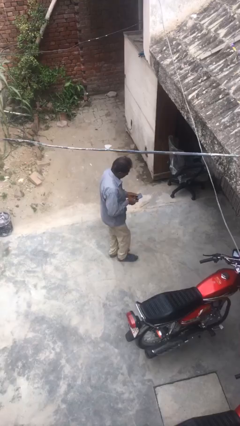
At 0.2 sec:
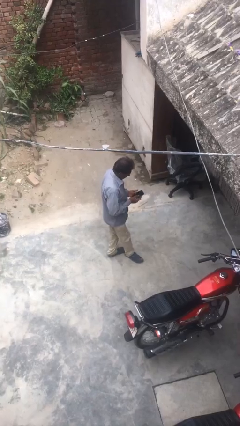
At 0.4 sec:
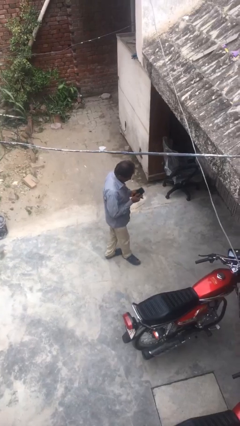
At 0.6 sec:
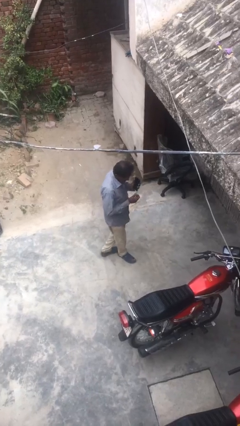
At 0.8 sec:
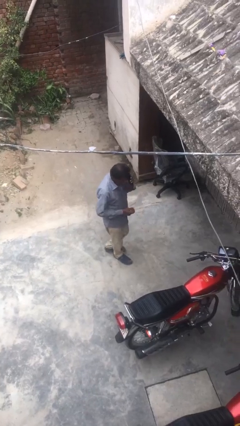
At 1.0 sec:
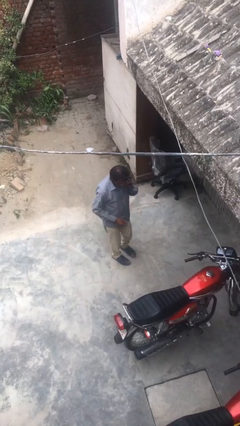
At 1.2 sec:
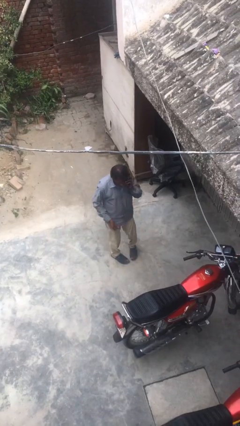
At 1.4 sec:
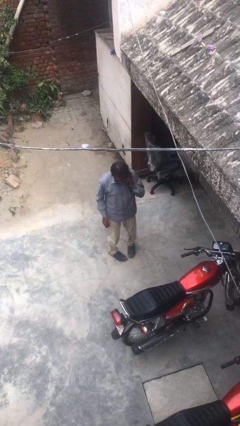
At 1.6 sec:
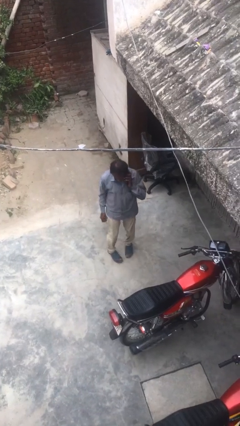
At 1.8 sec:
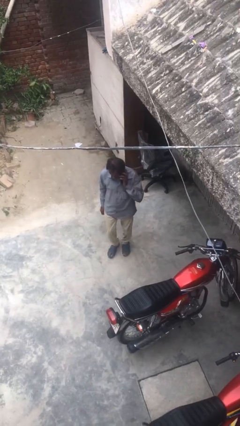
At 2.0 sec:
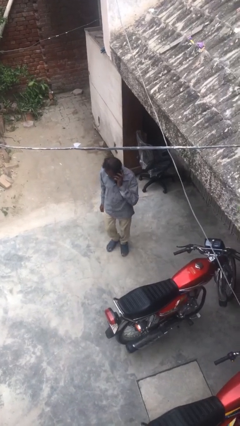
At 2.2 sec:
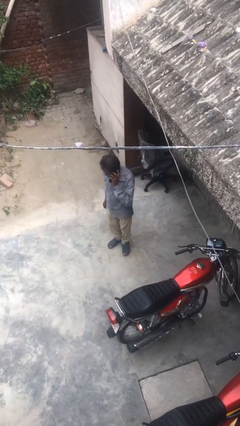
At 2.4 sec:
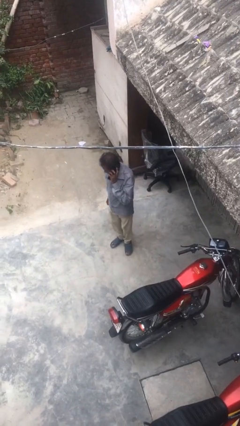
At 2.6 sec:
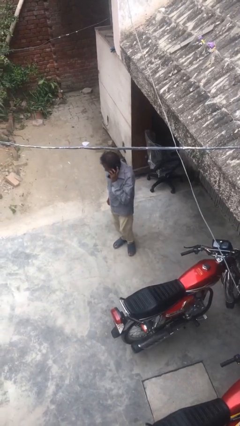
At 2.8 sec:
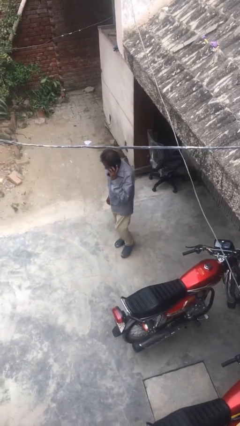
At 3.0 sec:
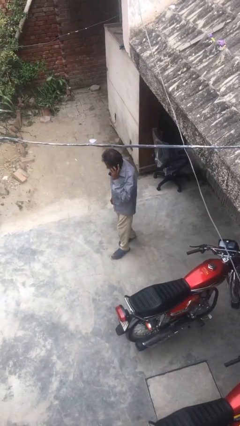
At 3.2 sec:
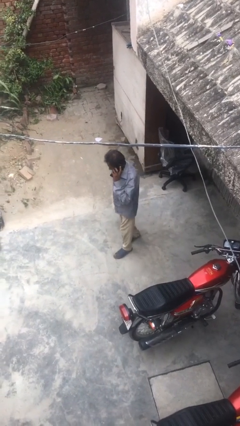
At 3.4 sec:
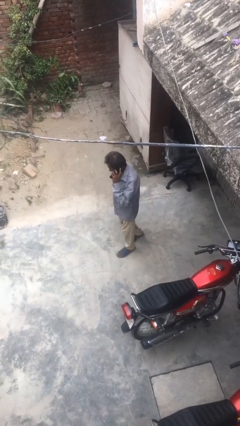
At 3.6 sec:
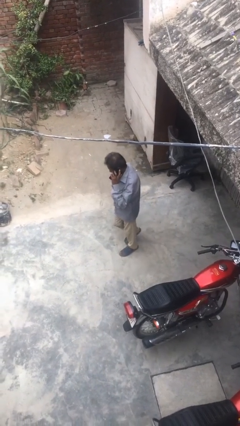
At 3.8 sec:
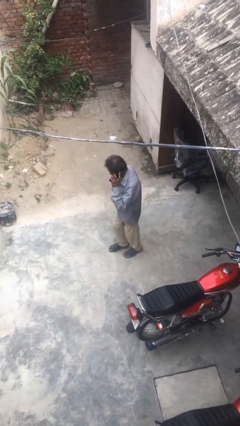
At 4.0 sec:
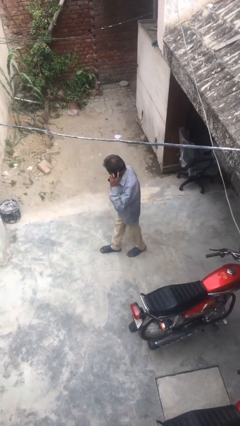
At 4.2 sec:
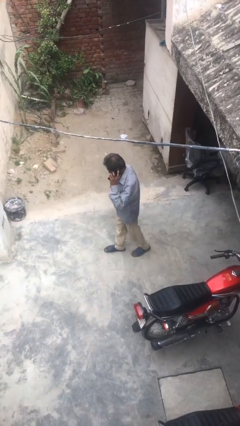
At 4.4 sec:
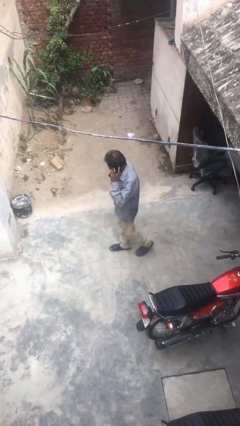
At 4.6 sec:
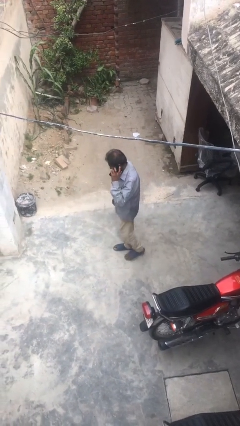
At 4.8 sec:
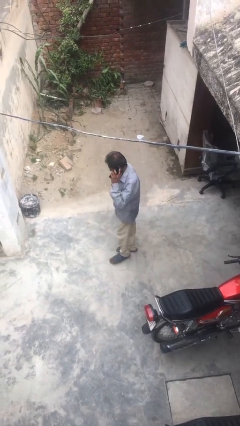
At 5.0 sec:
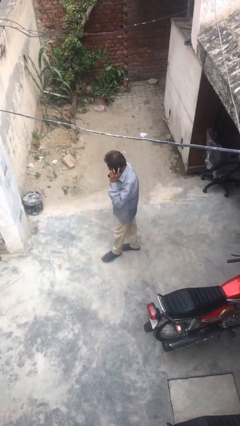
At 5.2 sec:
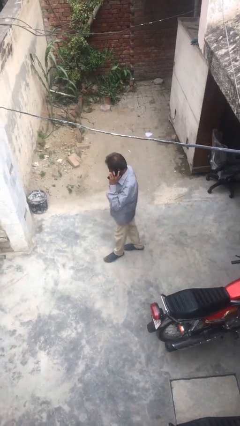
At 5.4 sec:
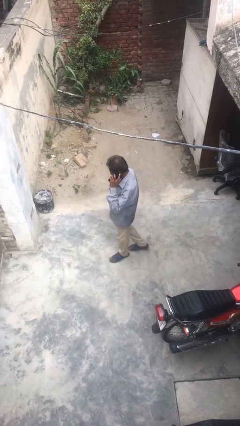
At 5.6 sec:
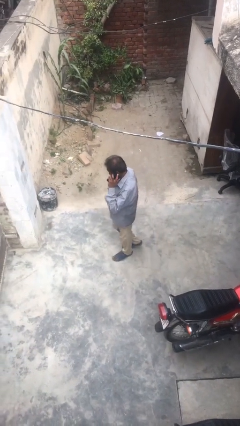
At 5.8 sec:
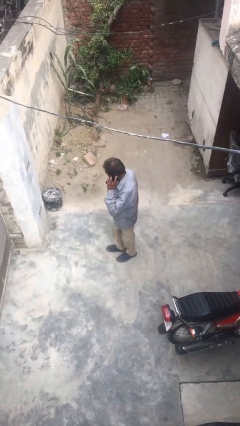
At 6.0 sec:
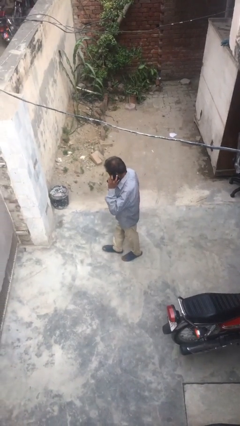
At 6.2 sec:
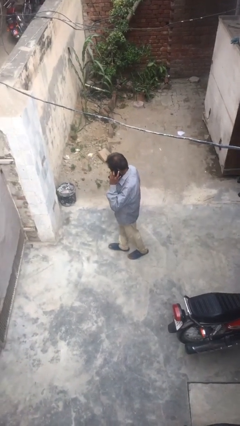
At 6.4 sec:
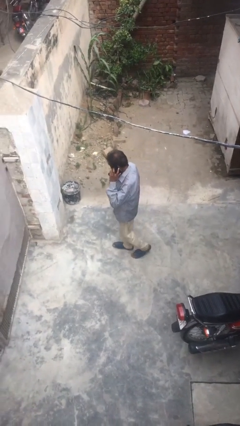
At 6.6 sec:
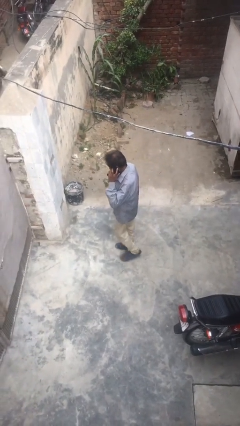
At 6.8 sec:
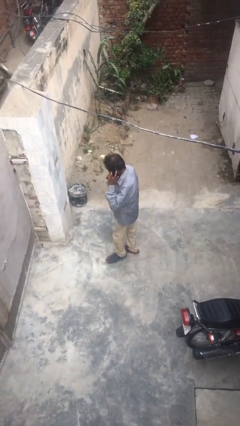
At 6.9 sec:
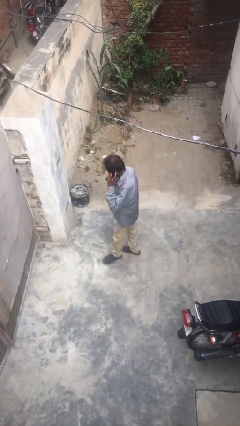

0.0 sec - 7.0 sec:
person talks on phone

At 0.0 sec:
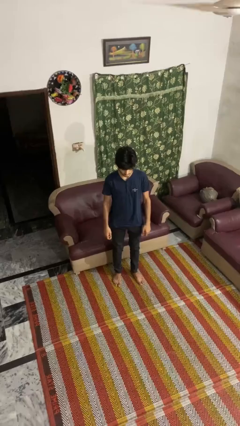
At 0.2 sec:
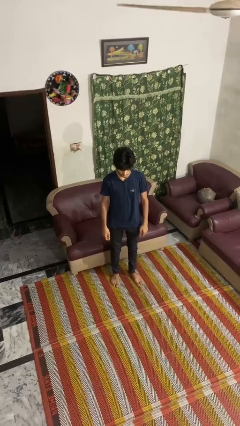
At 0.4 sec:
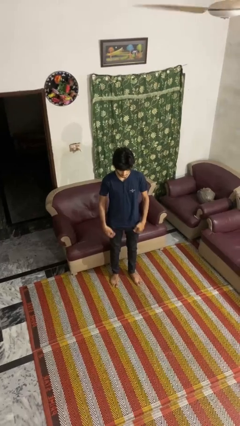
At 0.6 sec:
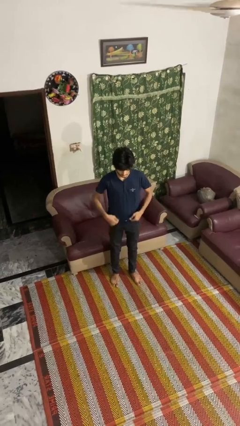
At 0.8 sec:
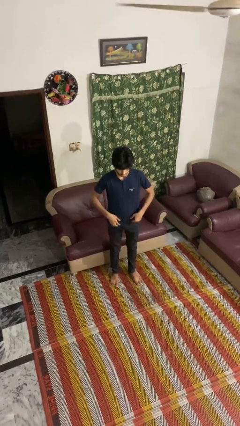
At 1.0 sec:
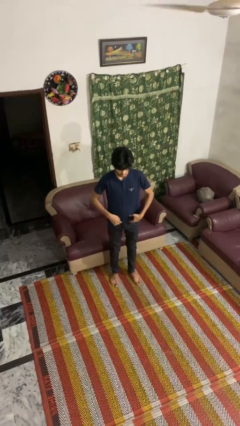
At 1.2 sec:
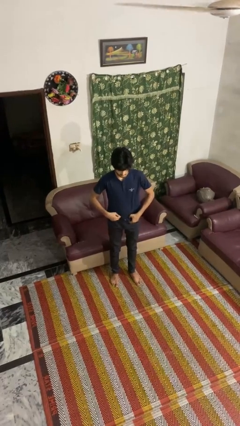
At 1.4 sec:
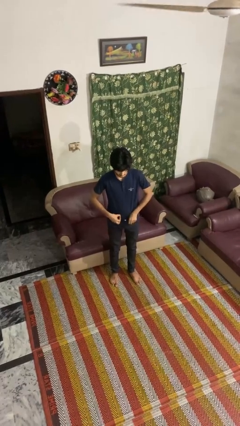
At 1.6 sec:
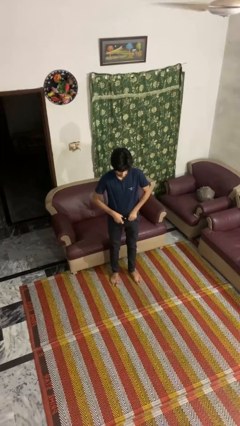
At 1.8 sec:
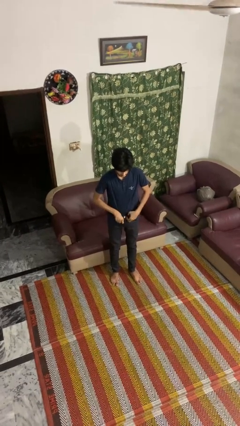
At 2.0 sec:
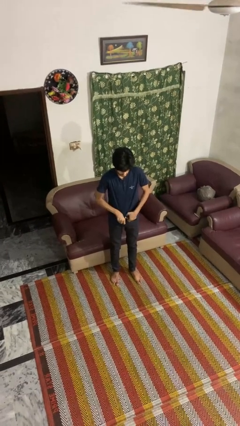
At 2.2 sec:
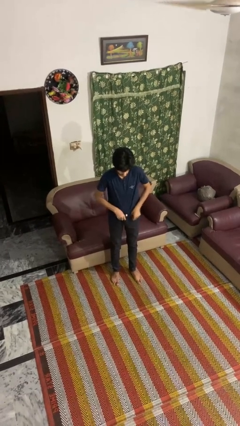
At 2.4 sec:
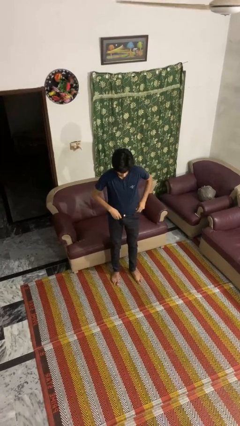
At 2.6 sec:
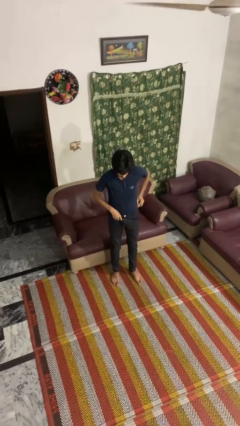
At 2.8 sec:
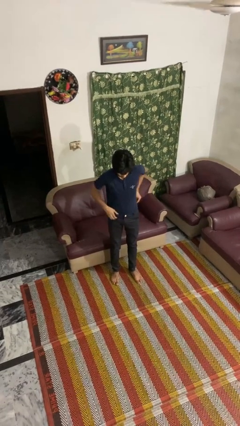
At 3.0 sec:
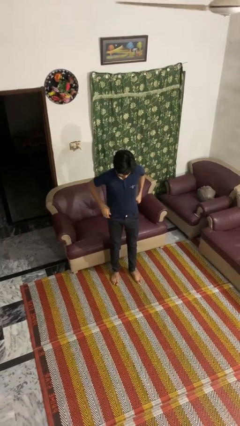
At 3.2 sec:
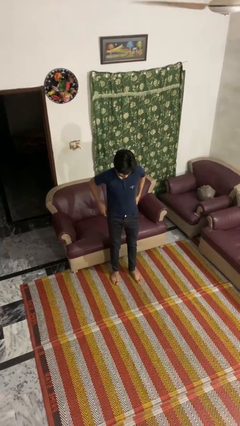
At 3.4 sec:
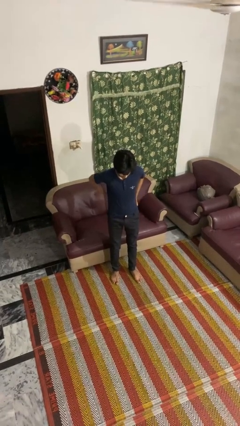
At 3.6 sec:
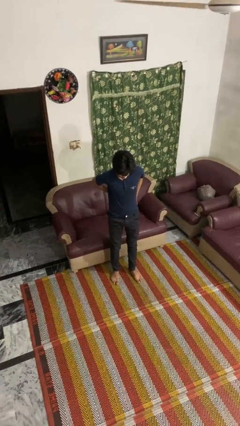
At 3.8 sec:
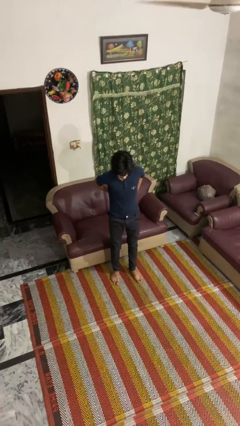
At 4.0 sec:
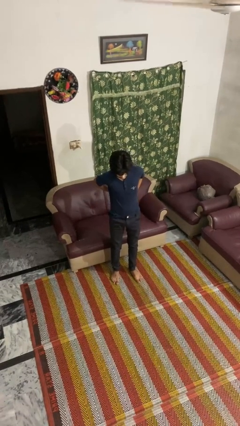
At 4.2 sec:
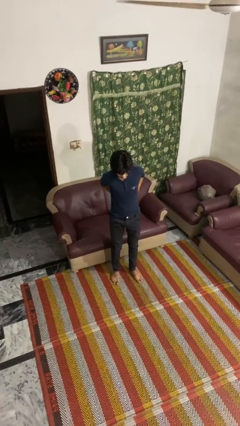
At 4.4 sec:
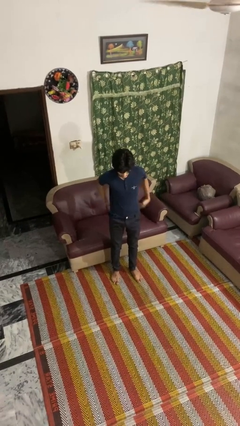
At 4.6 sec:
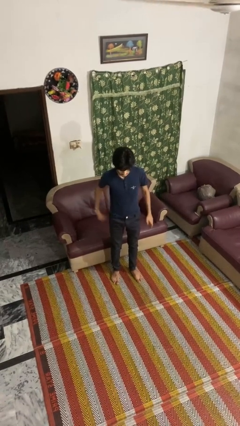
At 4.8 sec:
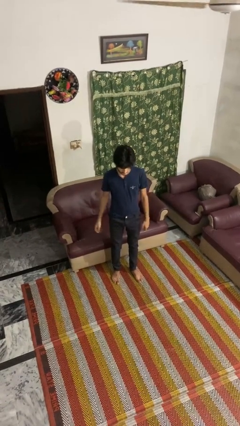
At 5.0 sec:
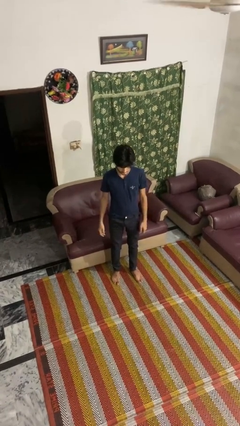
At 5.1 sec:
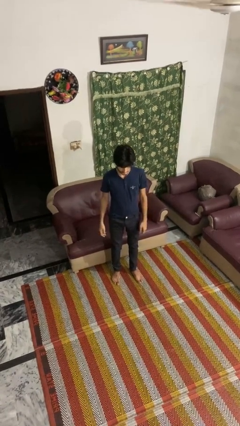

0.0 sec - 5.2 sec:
person tucks in shirt

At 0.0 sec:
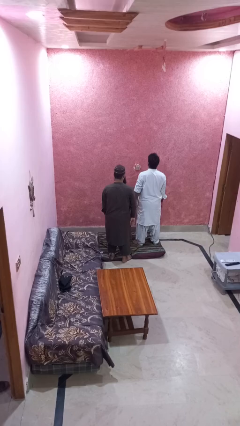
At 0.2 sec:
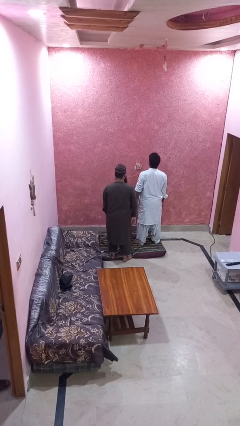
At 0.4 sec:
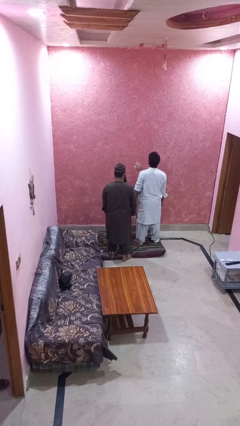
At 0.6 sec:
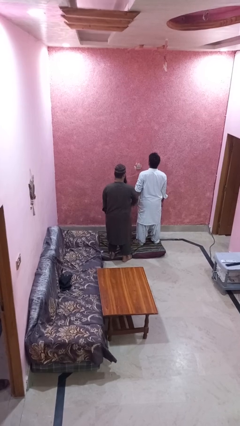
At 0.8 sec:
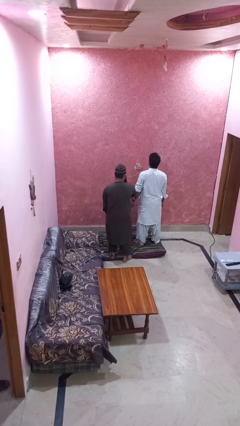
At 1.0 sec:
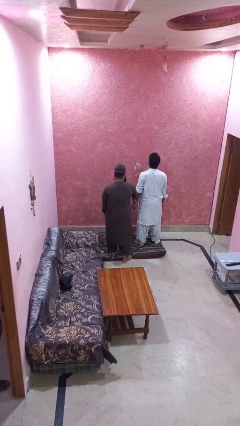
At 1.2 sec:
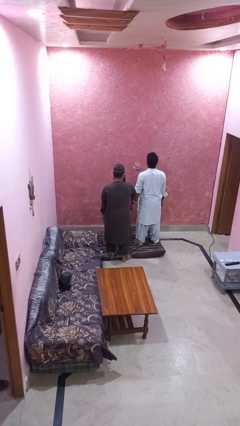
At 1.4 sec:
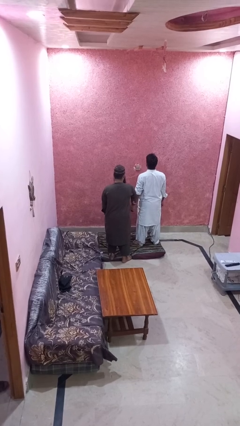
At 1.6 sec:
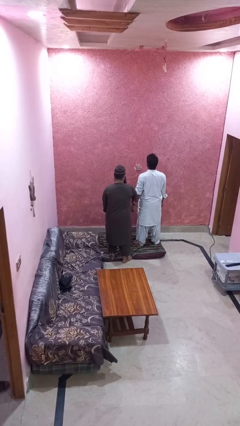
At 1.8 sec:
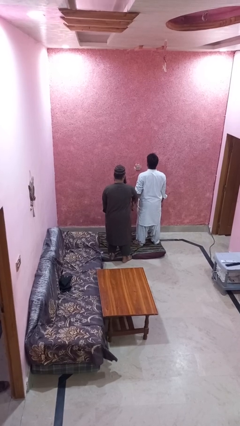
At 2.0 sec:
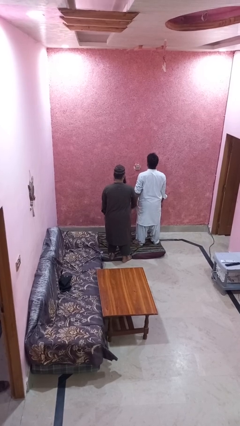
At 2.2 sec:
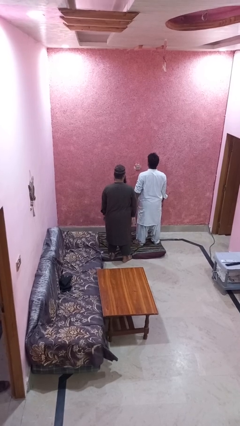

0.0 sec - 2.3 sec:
person grabs person by forearm

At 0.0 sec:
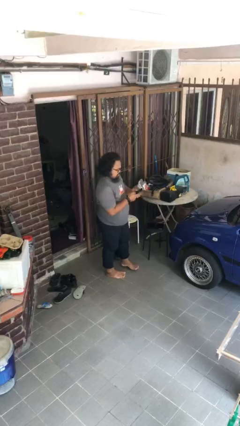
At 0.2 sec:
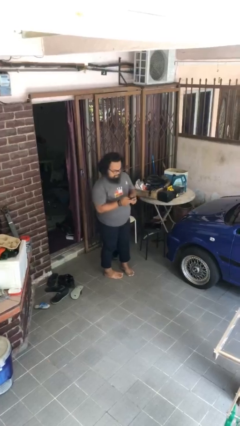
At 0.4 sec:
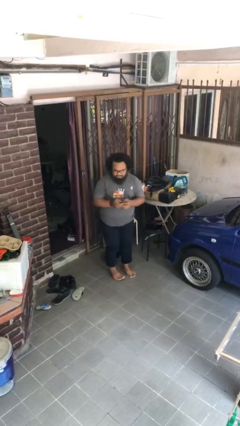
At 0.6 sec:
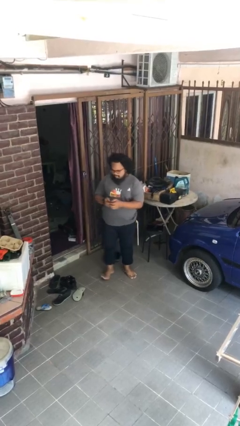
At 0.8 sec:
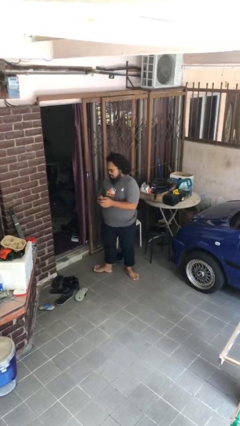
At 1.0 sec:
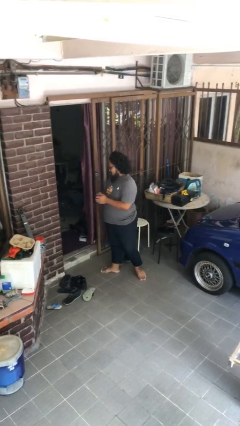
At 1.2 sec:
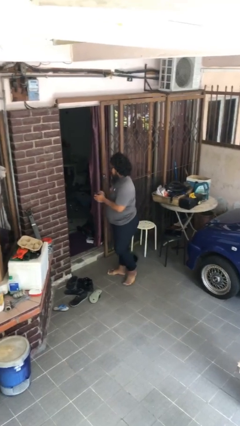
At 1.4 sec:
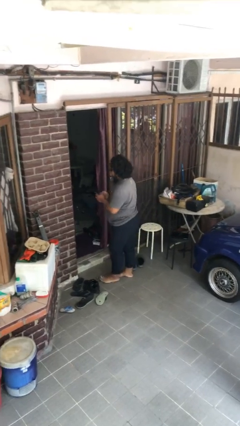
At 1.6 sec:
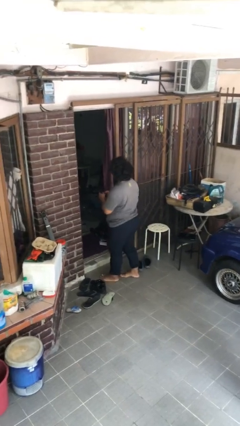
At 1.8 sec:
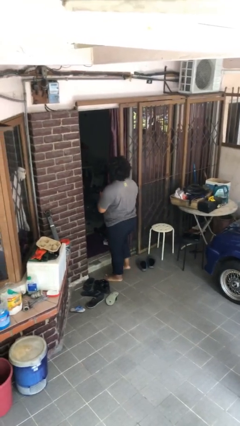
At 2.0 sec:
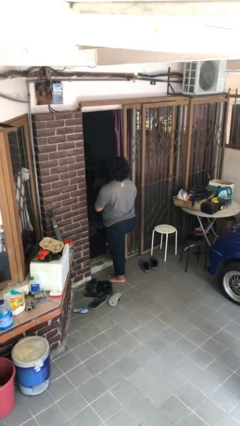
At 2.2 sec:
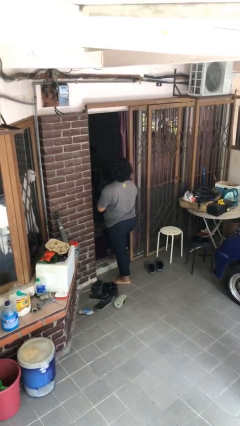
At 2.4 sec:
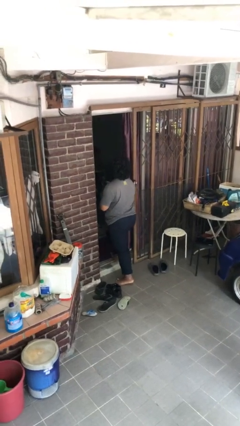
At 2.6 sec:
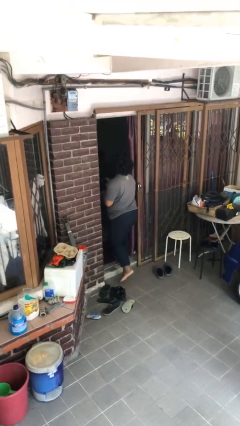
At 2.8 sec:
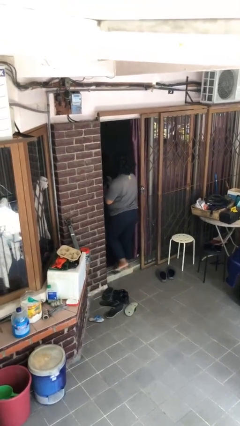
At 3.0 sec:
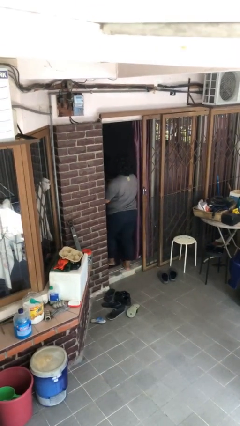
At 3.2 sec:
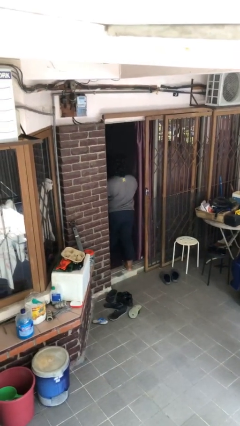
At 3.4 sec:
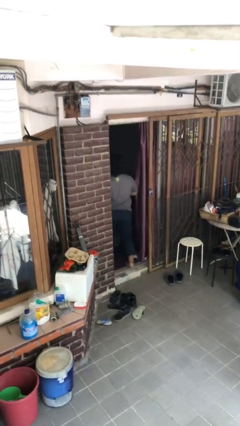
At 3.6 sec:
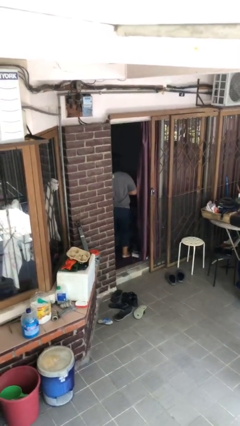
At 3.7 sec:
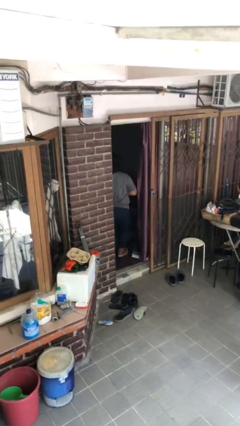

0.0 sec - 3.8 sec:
person exits scene through structure
